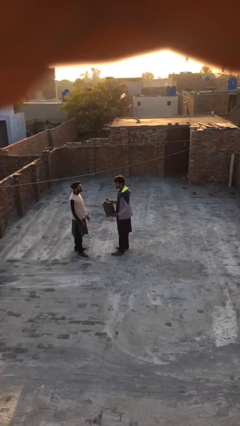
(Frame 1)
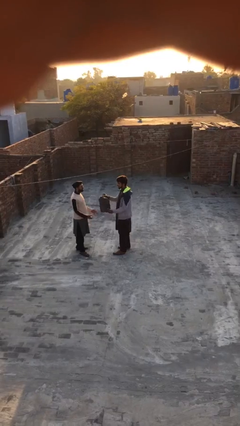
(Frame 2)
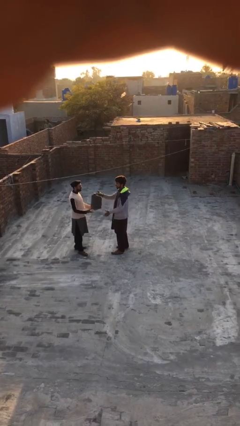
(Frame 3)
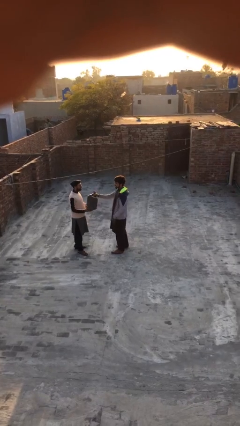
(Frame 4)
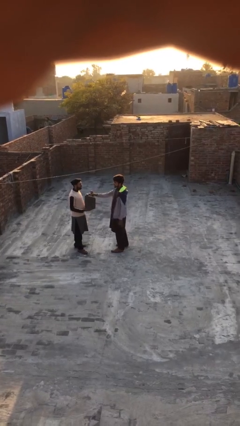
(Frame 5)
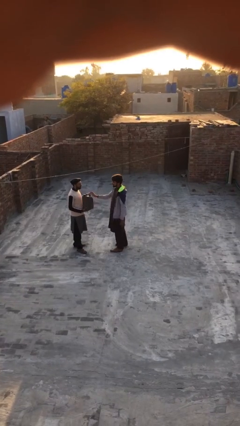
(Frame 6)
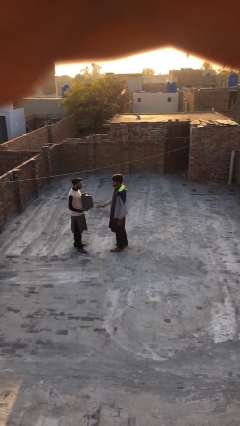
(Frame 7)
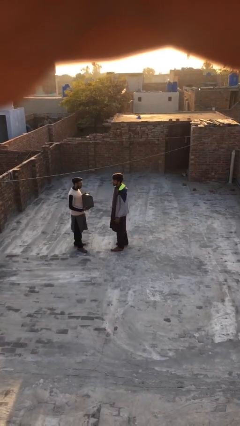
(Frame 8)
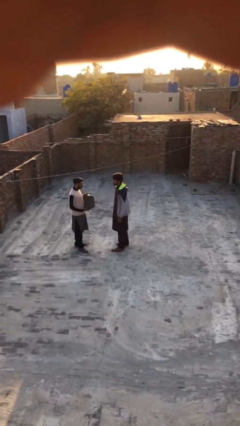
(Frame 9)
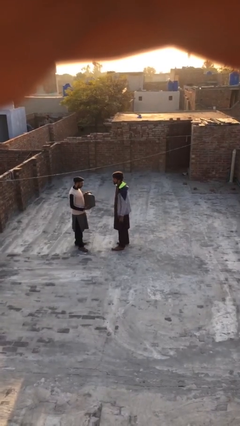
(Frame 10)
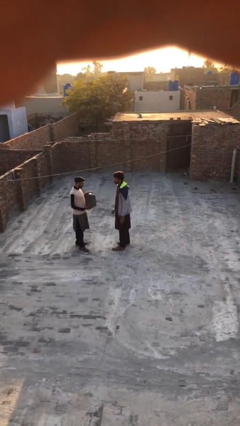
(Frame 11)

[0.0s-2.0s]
person transfers object to person

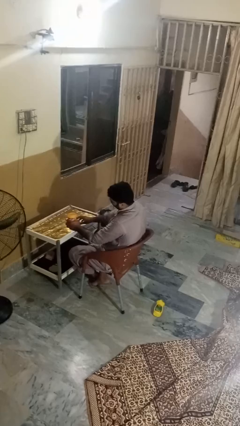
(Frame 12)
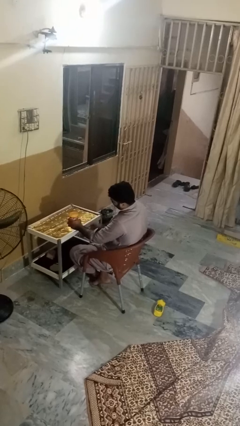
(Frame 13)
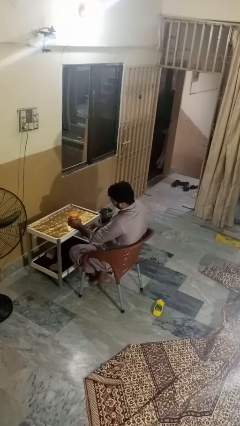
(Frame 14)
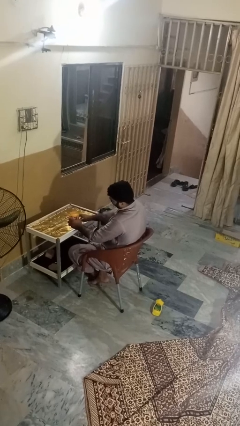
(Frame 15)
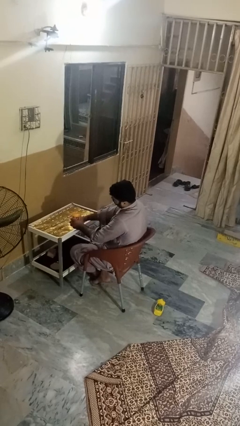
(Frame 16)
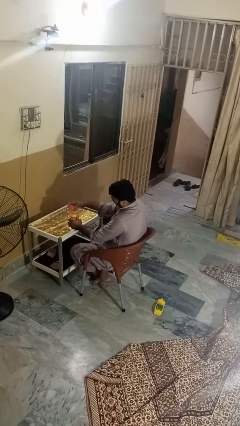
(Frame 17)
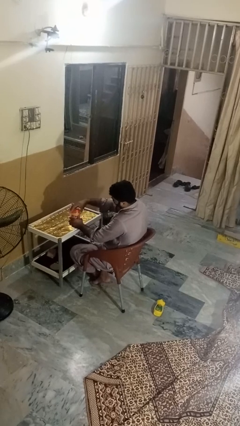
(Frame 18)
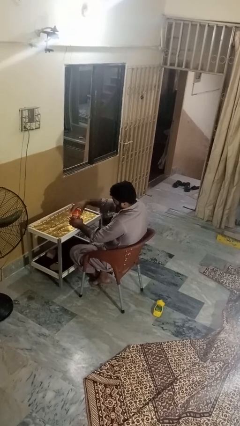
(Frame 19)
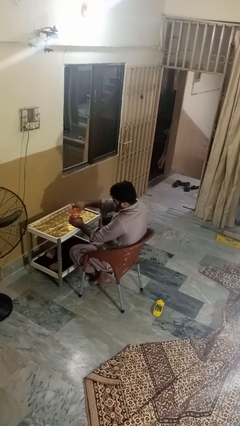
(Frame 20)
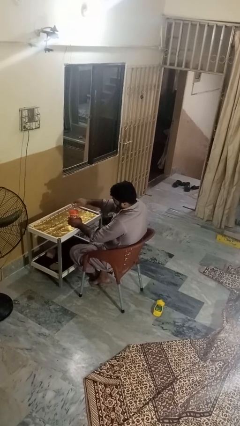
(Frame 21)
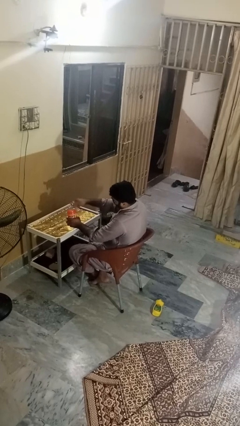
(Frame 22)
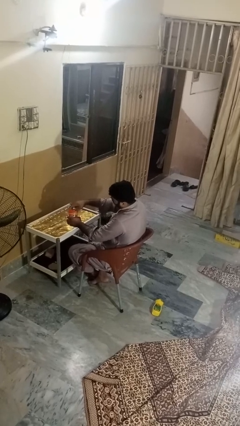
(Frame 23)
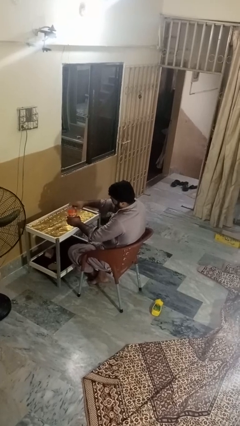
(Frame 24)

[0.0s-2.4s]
person closes jar

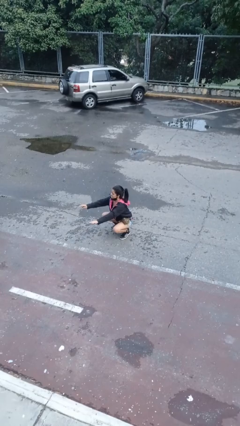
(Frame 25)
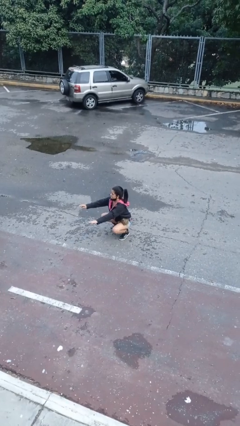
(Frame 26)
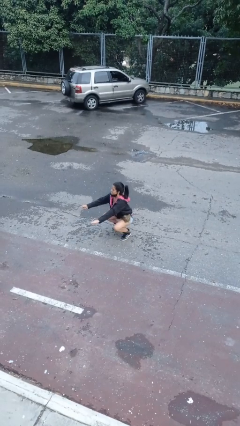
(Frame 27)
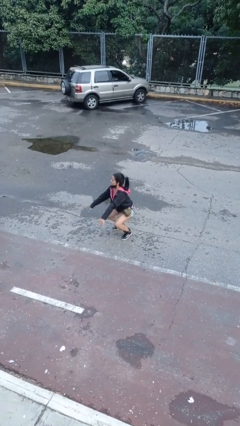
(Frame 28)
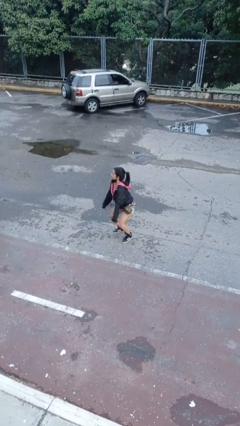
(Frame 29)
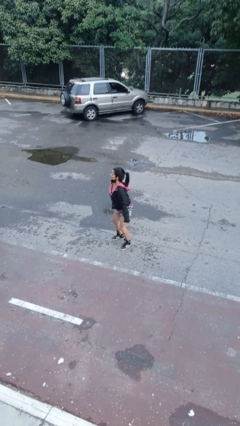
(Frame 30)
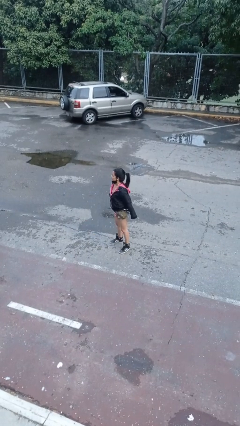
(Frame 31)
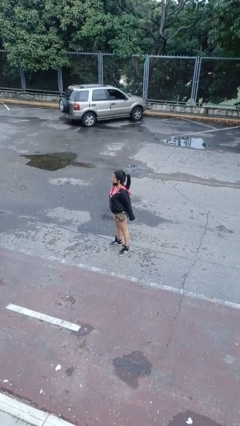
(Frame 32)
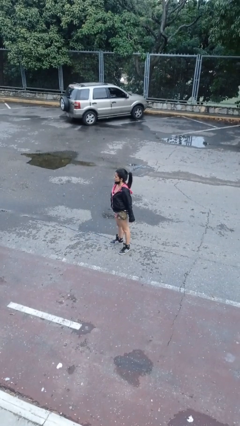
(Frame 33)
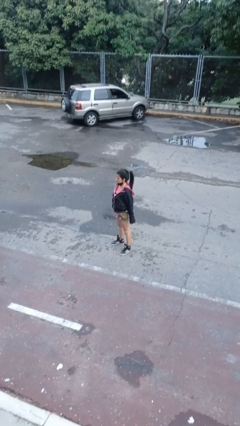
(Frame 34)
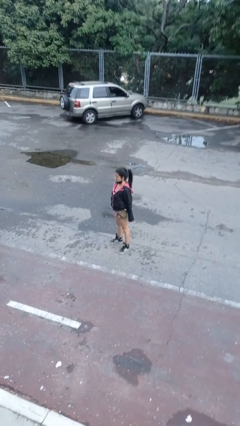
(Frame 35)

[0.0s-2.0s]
person stands up

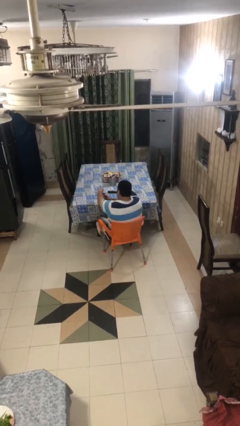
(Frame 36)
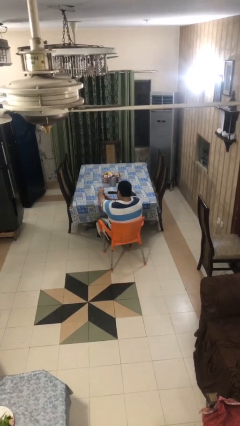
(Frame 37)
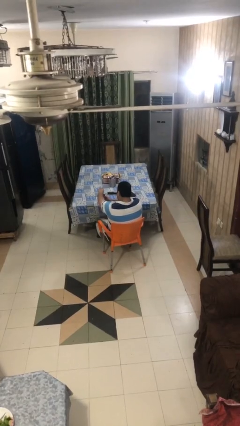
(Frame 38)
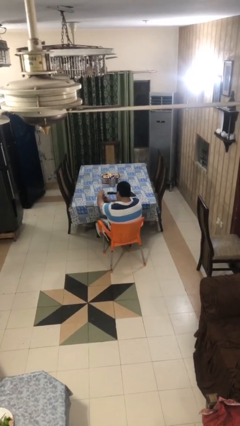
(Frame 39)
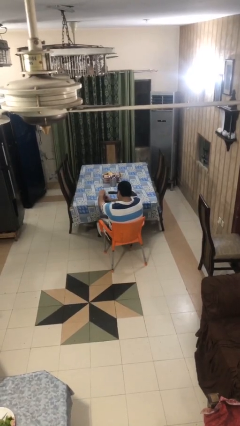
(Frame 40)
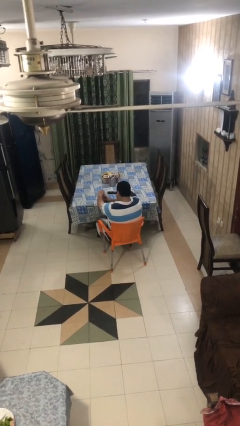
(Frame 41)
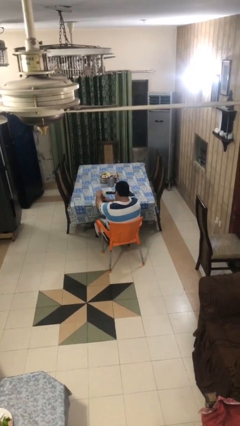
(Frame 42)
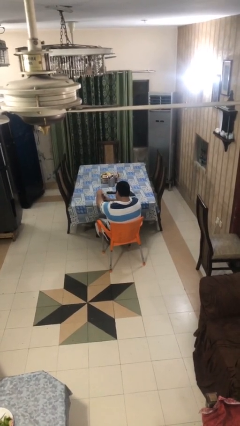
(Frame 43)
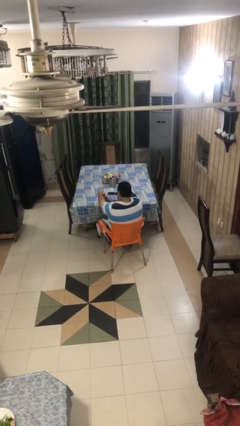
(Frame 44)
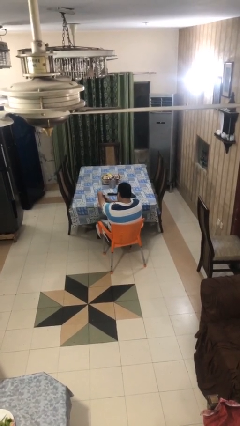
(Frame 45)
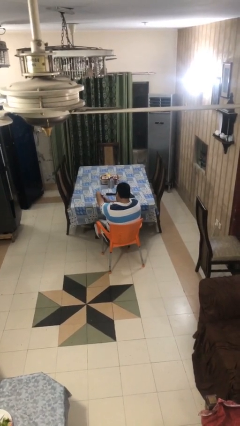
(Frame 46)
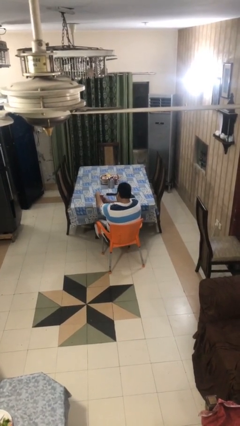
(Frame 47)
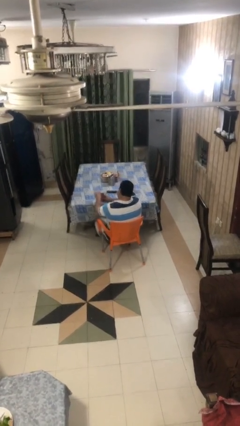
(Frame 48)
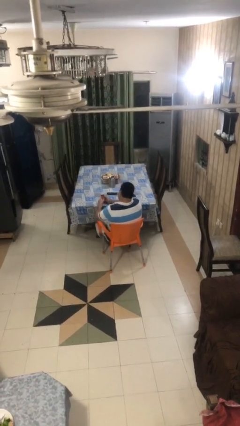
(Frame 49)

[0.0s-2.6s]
person opens beverage can

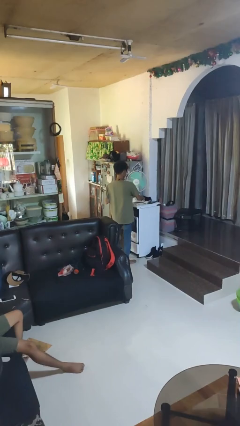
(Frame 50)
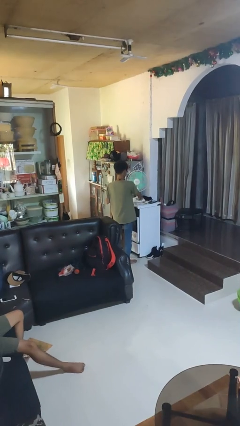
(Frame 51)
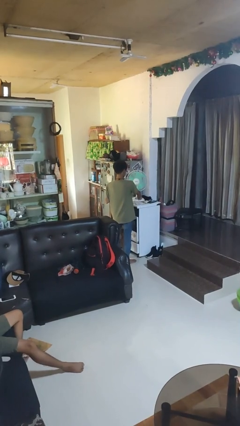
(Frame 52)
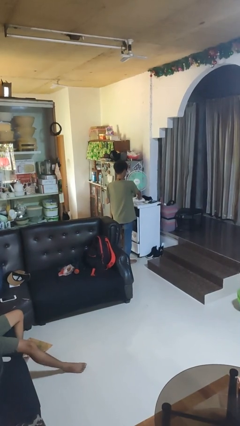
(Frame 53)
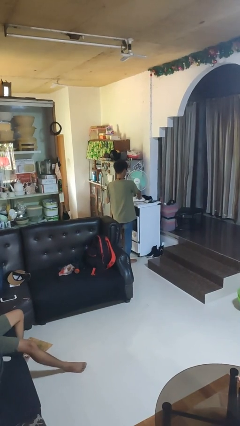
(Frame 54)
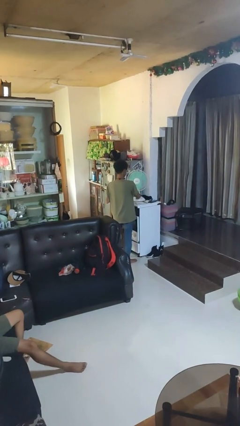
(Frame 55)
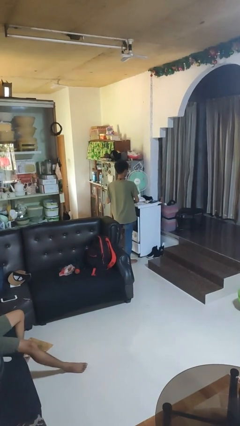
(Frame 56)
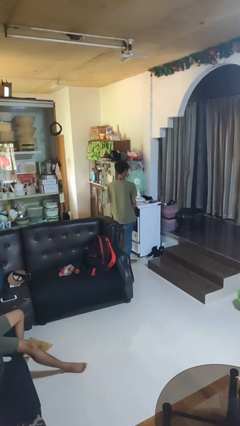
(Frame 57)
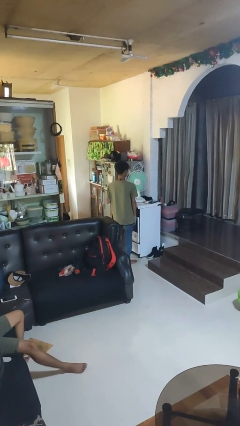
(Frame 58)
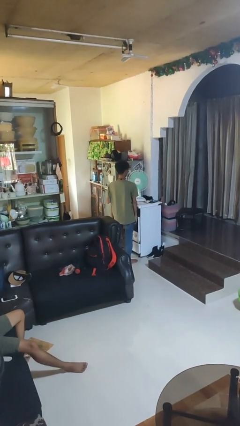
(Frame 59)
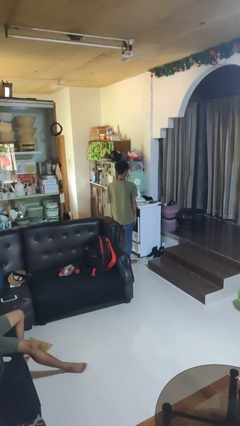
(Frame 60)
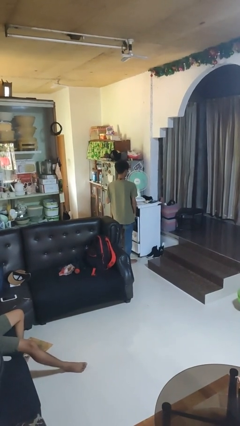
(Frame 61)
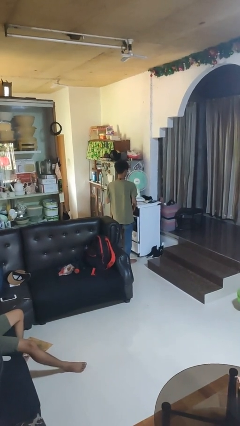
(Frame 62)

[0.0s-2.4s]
person turns on fan

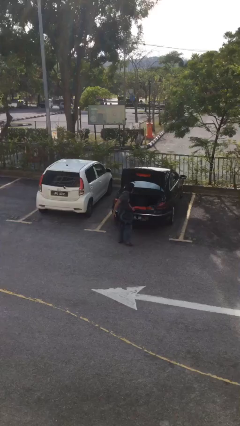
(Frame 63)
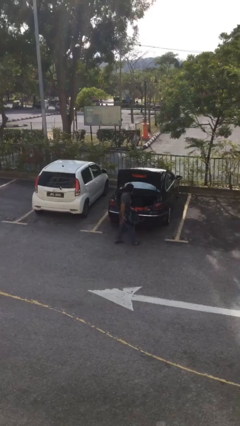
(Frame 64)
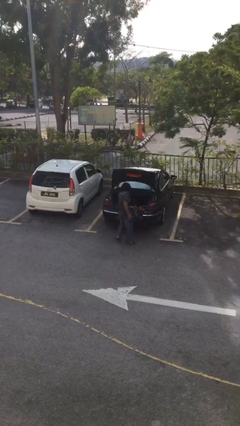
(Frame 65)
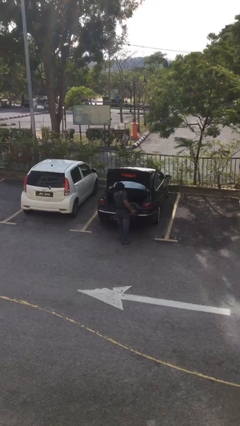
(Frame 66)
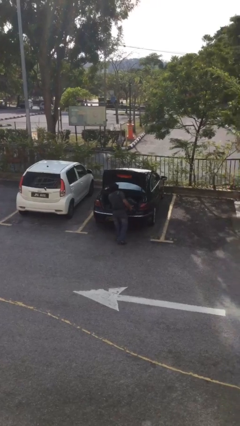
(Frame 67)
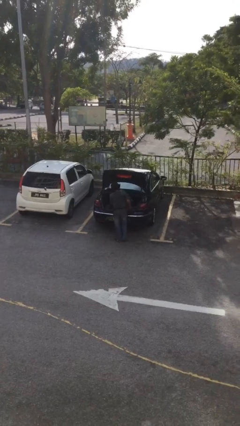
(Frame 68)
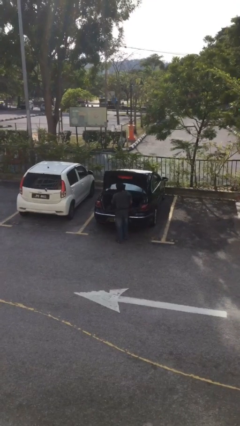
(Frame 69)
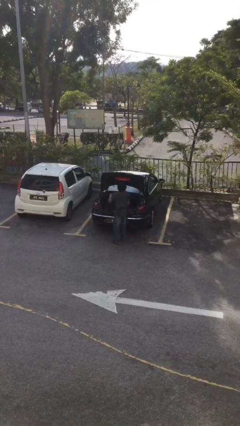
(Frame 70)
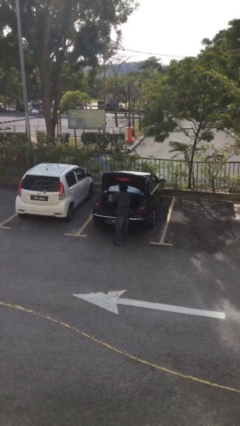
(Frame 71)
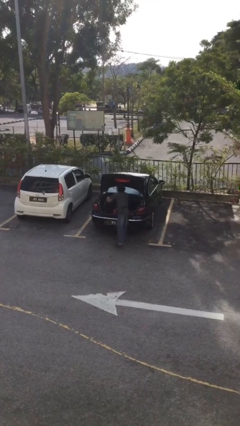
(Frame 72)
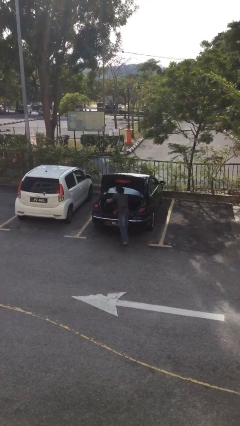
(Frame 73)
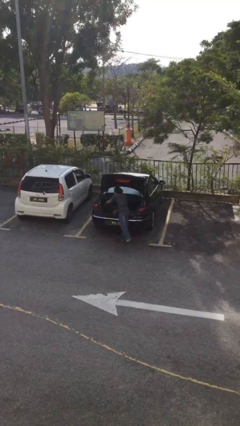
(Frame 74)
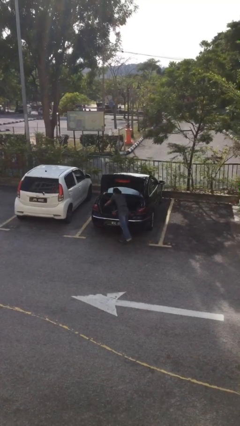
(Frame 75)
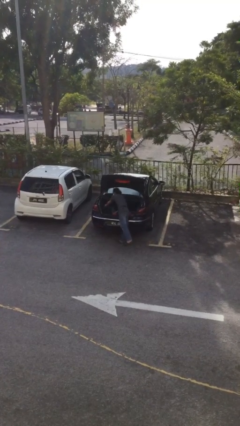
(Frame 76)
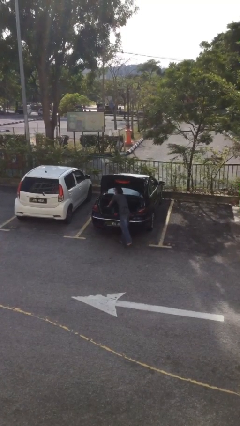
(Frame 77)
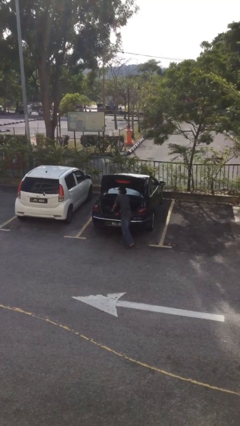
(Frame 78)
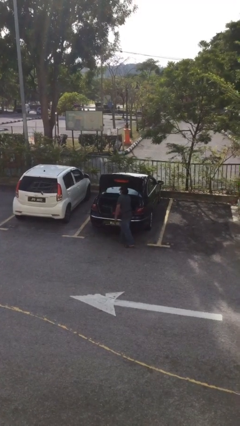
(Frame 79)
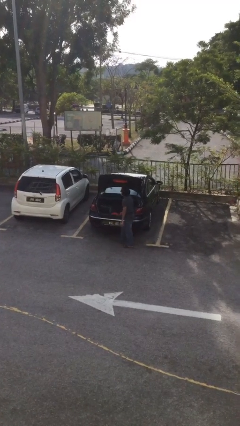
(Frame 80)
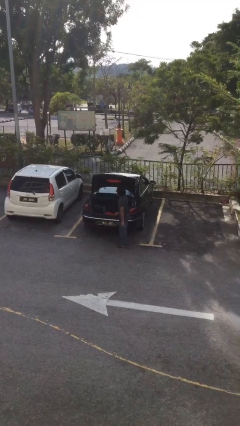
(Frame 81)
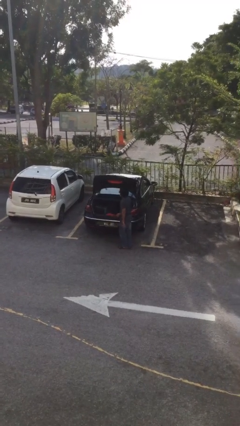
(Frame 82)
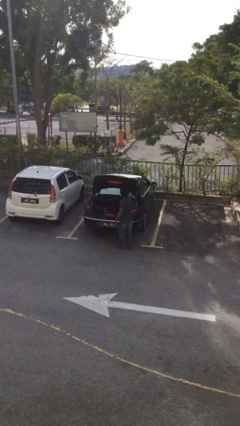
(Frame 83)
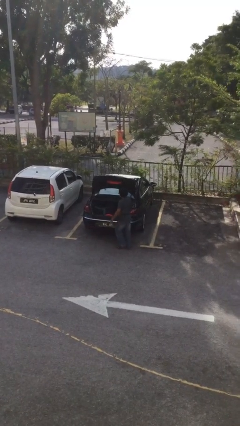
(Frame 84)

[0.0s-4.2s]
person loads car

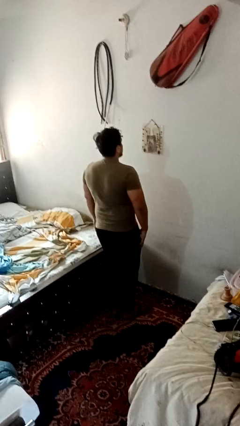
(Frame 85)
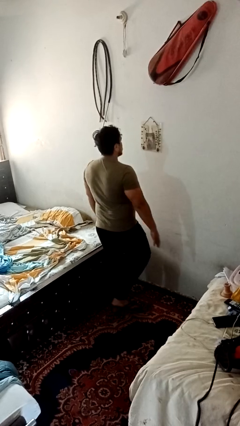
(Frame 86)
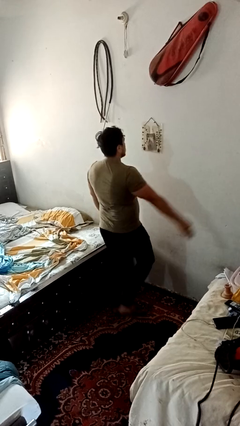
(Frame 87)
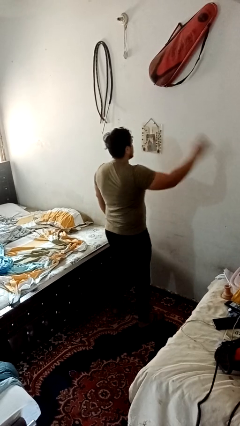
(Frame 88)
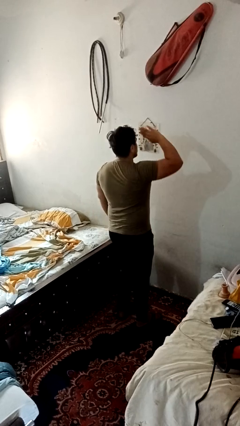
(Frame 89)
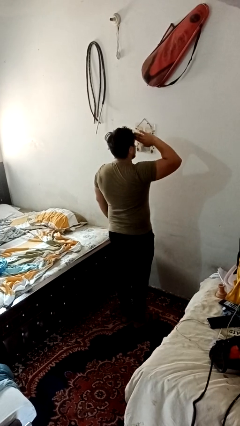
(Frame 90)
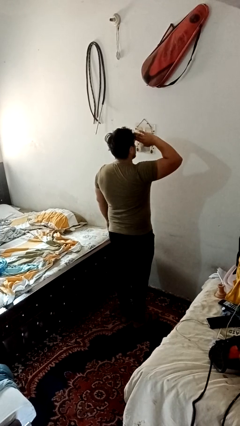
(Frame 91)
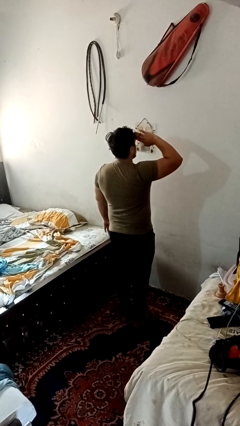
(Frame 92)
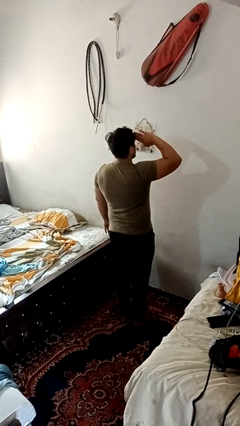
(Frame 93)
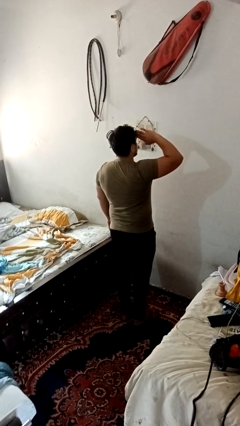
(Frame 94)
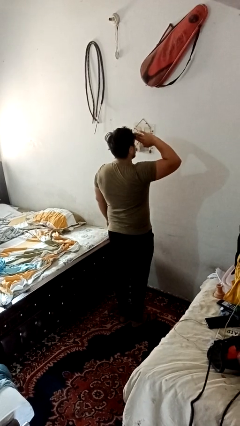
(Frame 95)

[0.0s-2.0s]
person salutes

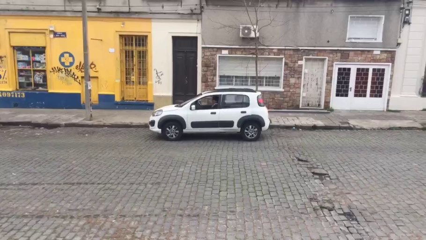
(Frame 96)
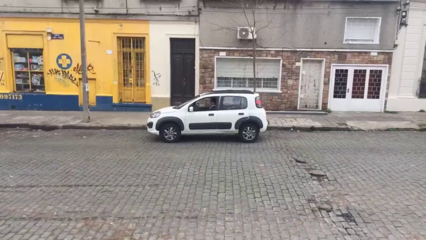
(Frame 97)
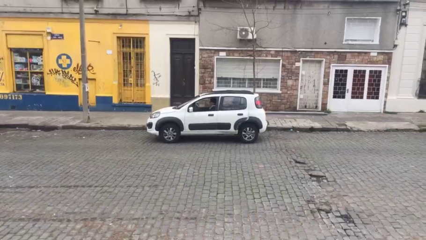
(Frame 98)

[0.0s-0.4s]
car drops off person
